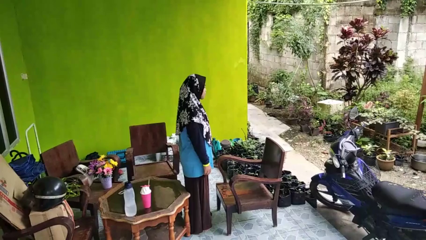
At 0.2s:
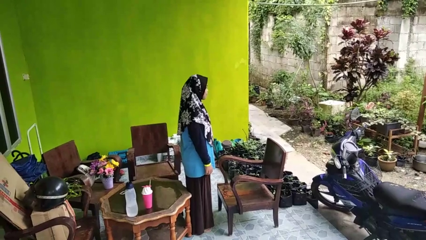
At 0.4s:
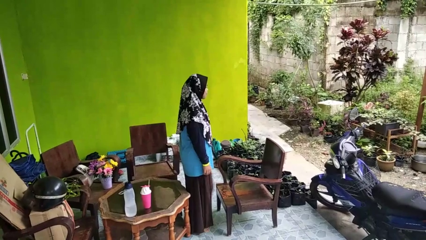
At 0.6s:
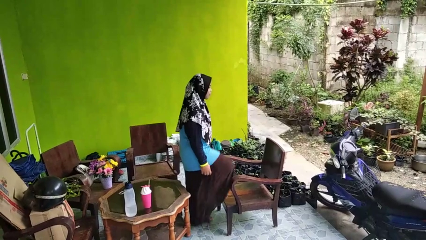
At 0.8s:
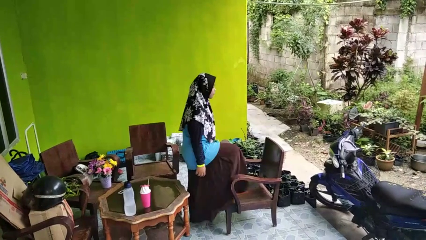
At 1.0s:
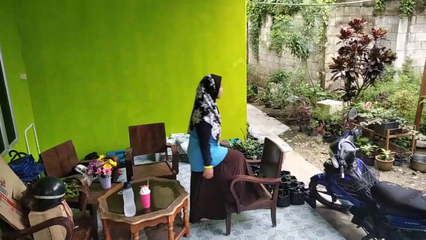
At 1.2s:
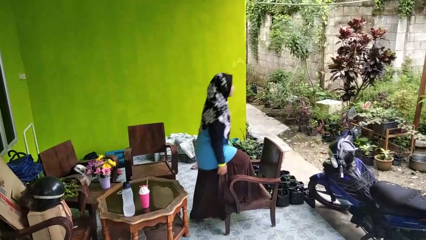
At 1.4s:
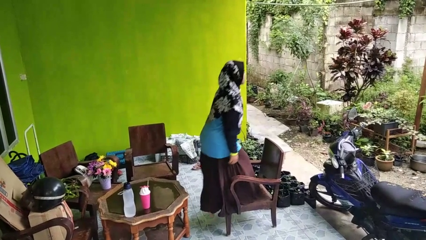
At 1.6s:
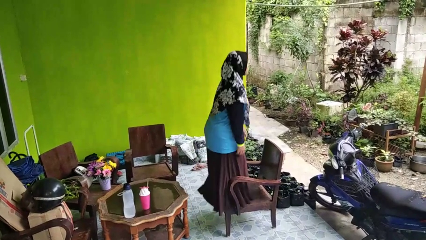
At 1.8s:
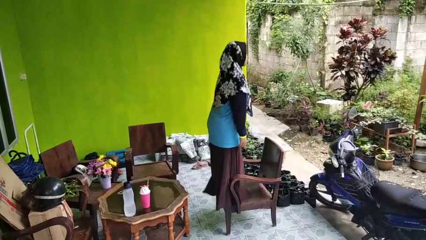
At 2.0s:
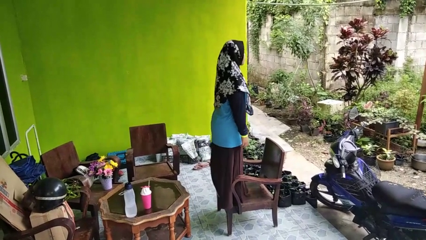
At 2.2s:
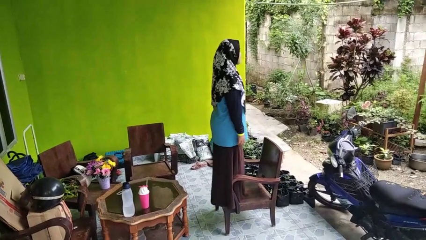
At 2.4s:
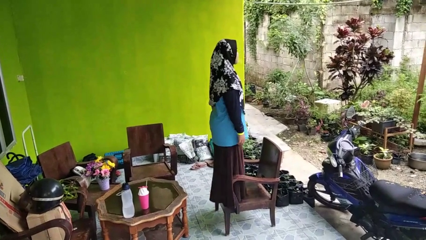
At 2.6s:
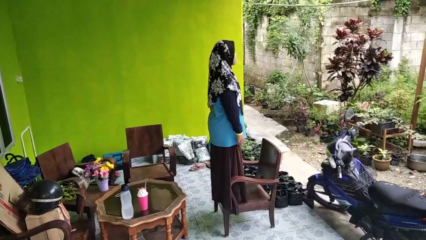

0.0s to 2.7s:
person climbs on chair

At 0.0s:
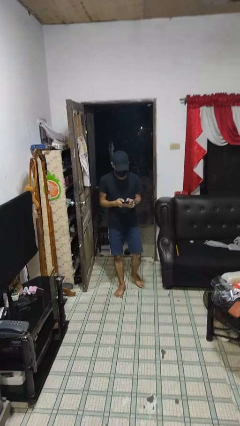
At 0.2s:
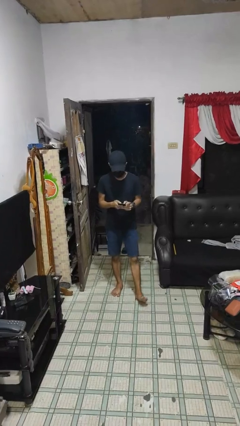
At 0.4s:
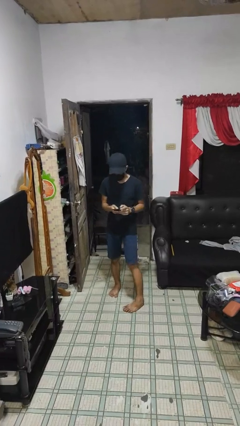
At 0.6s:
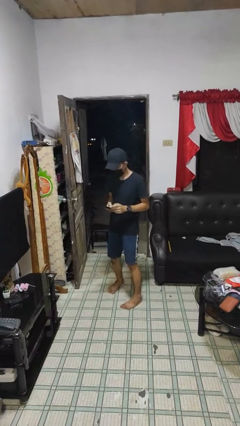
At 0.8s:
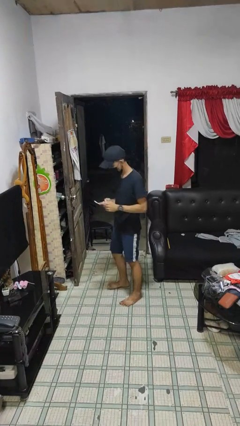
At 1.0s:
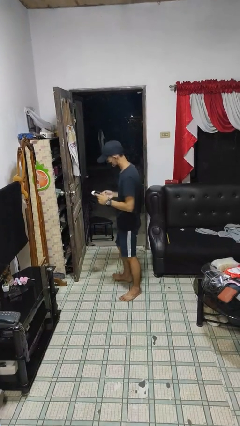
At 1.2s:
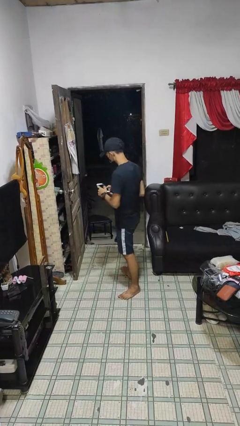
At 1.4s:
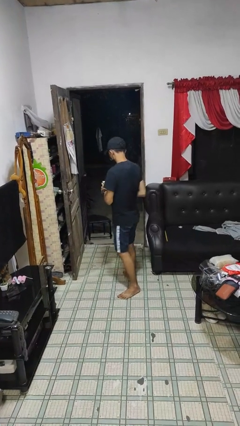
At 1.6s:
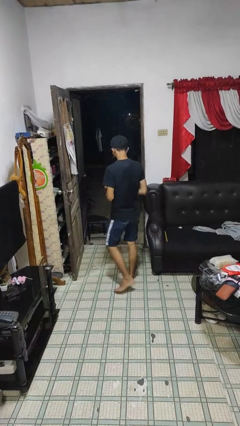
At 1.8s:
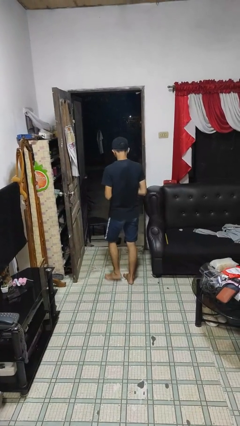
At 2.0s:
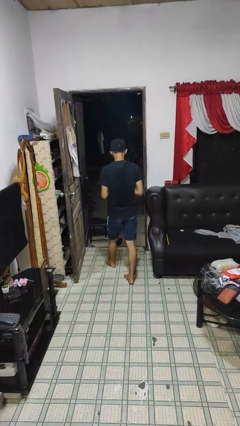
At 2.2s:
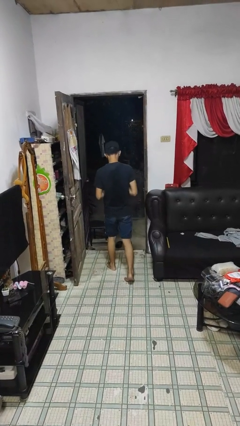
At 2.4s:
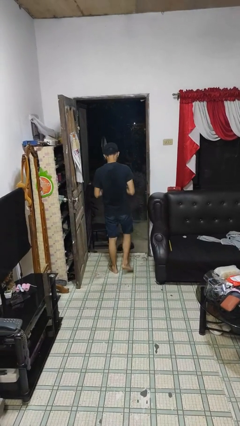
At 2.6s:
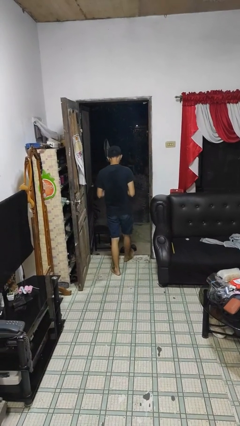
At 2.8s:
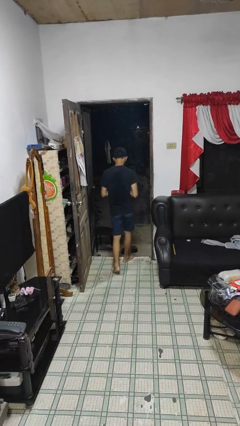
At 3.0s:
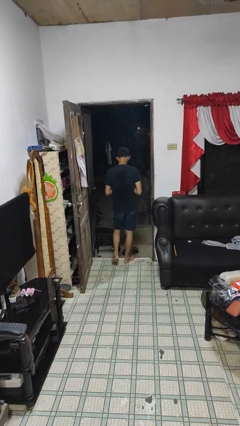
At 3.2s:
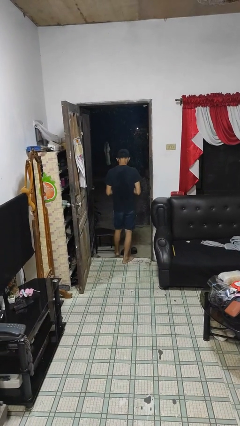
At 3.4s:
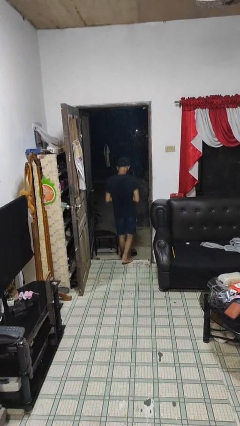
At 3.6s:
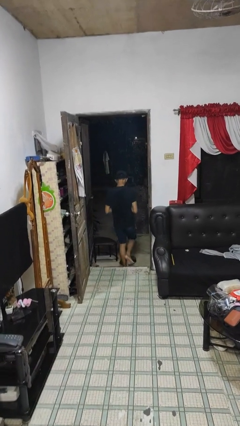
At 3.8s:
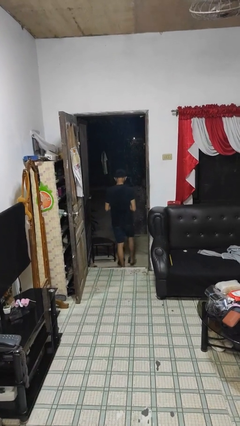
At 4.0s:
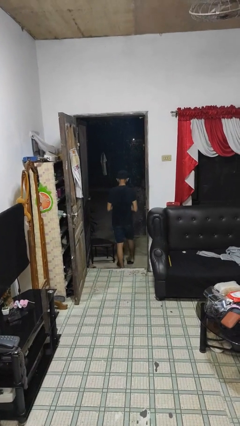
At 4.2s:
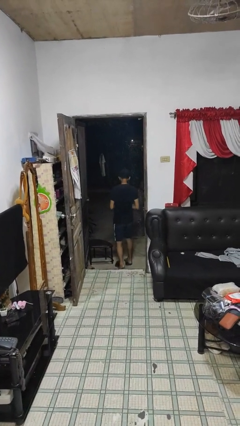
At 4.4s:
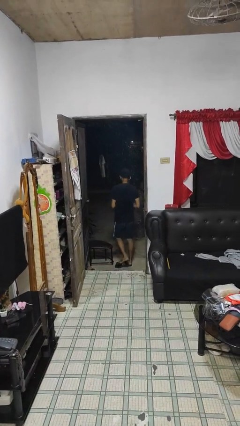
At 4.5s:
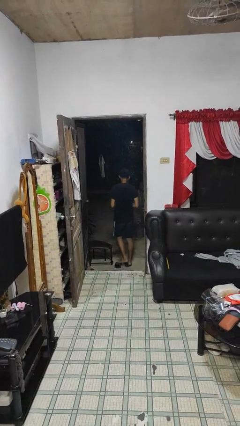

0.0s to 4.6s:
person exits scene through structure

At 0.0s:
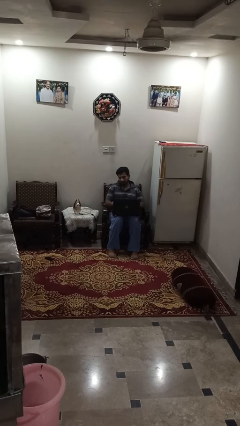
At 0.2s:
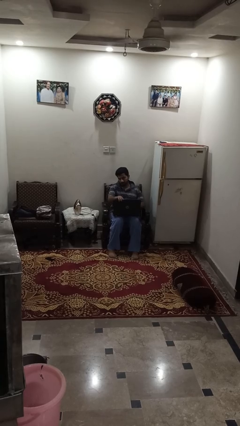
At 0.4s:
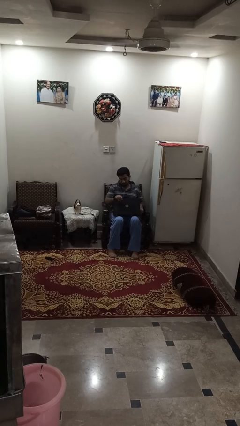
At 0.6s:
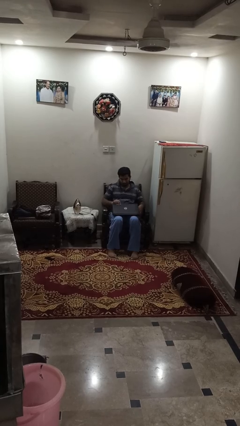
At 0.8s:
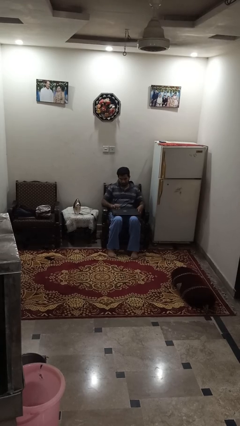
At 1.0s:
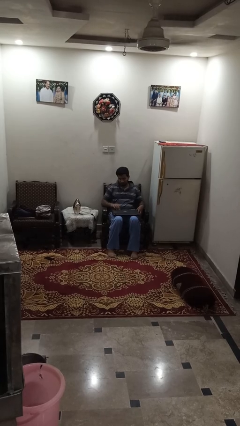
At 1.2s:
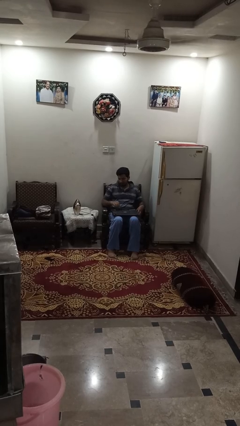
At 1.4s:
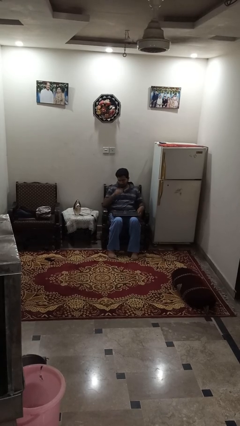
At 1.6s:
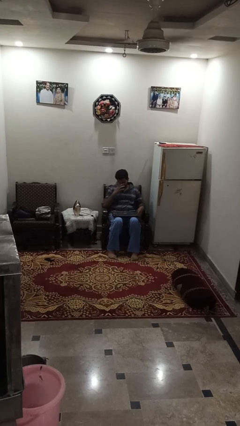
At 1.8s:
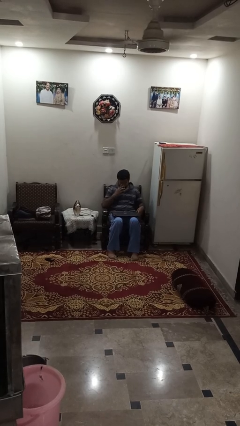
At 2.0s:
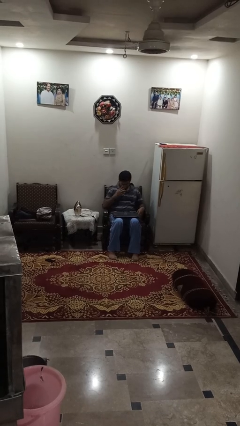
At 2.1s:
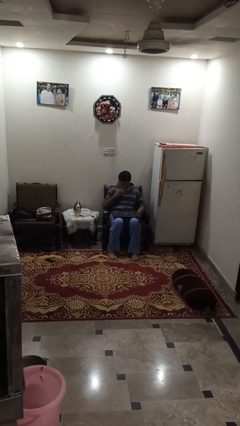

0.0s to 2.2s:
person closes laptop

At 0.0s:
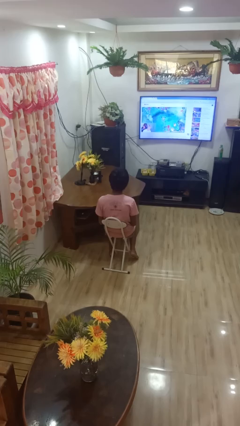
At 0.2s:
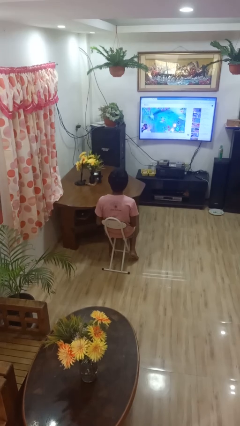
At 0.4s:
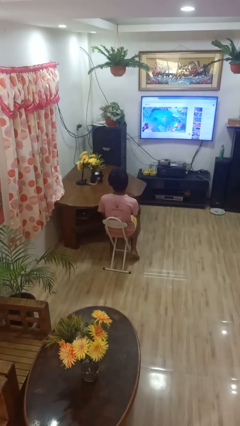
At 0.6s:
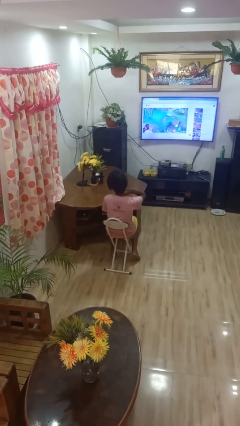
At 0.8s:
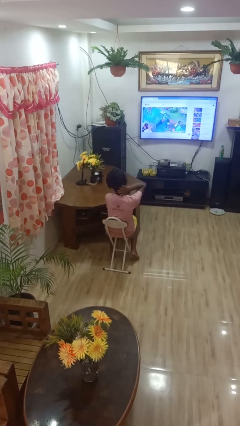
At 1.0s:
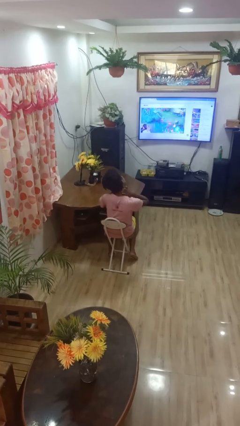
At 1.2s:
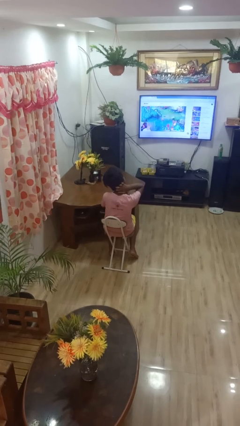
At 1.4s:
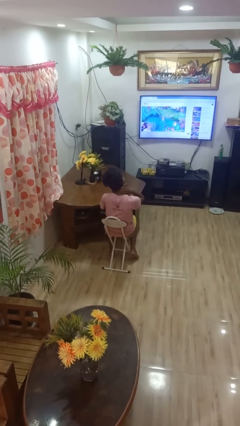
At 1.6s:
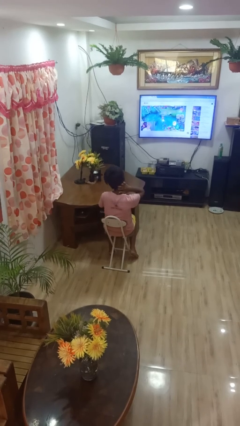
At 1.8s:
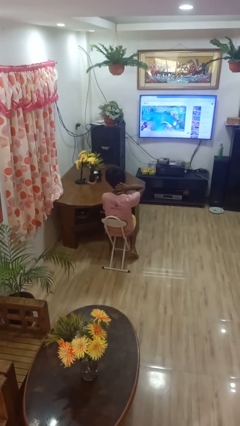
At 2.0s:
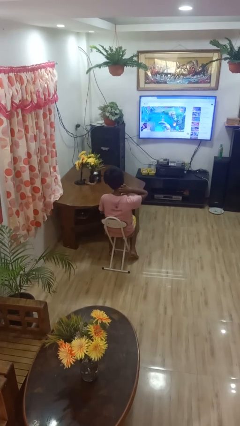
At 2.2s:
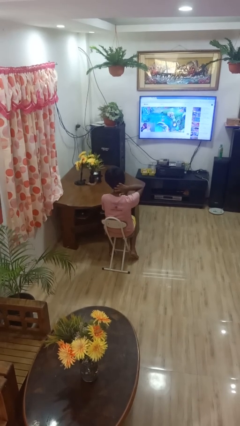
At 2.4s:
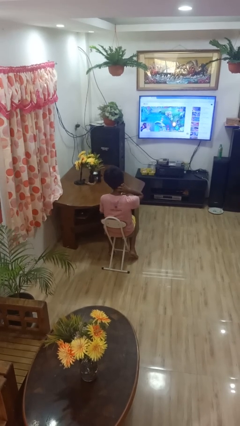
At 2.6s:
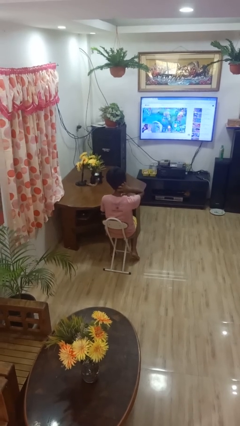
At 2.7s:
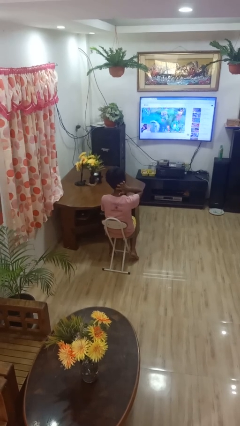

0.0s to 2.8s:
person rubs neck

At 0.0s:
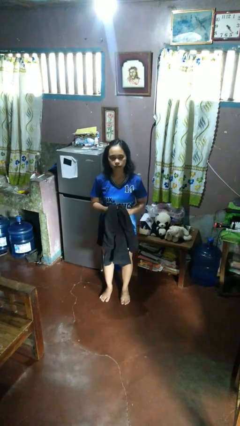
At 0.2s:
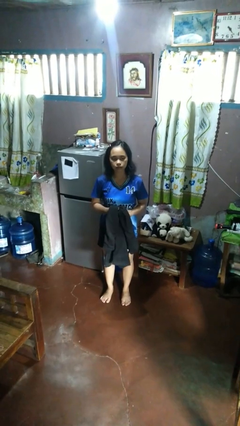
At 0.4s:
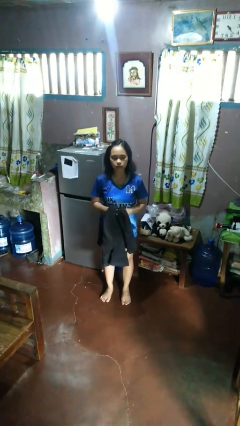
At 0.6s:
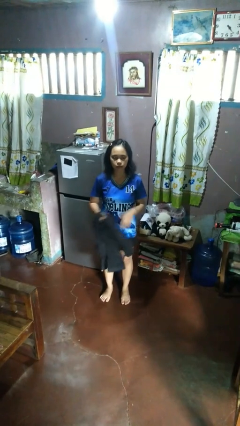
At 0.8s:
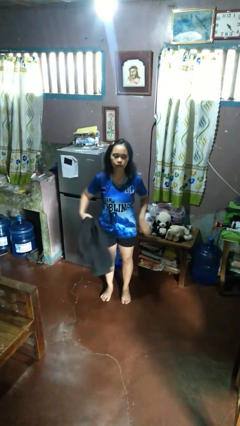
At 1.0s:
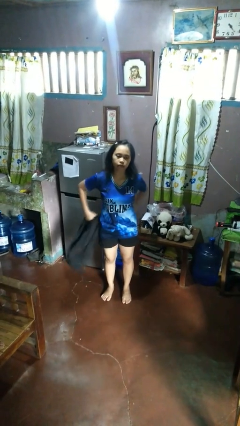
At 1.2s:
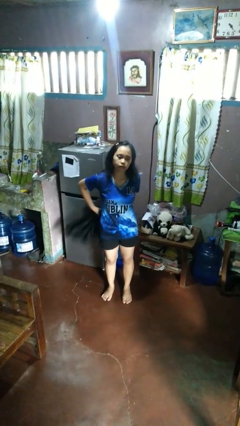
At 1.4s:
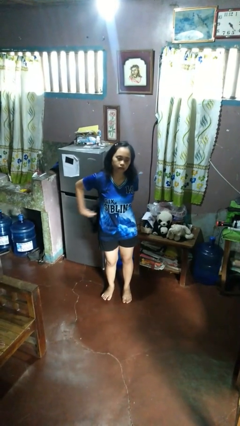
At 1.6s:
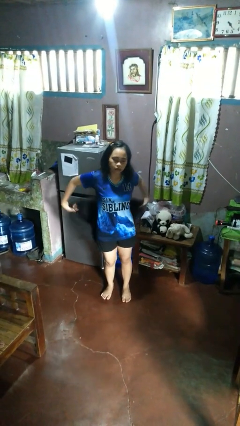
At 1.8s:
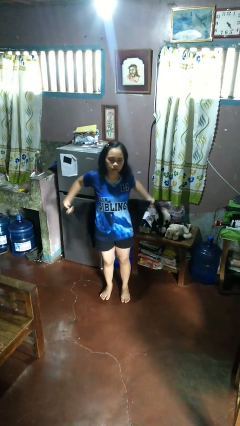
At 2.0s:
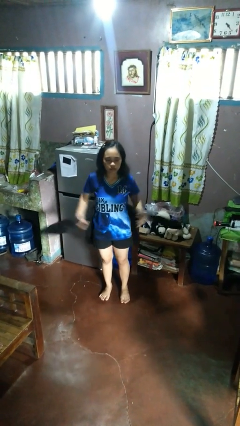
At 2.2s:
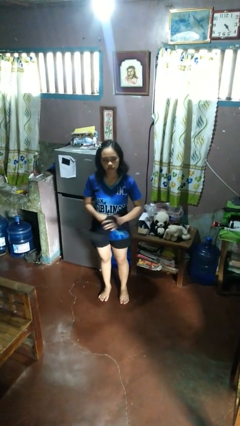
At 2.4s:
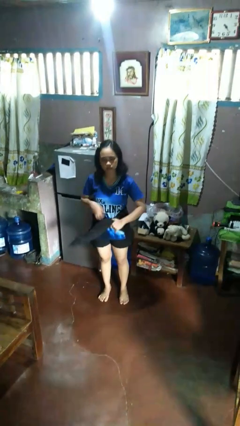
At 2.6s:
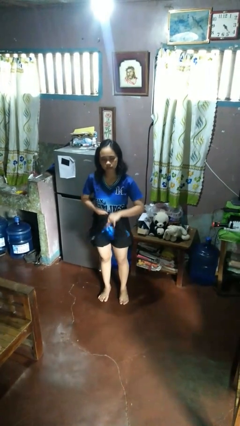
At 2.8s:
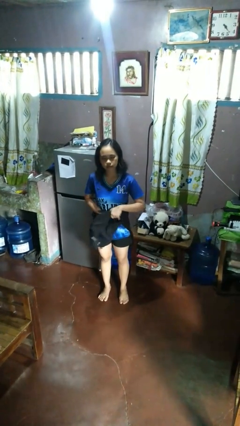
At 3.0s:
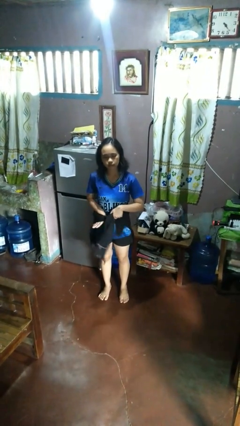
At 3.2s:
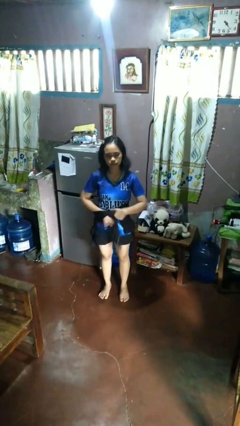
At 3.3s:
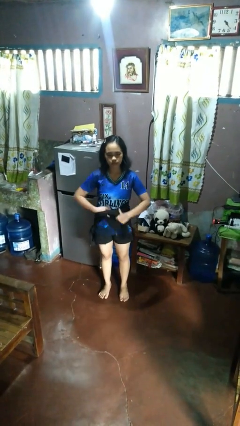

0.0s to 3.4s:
person ties jacket around waist

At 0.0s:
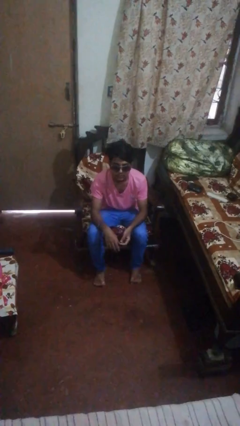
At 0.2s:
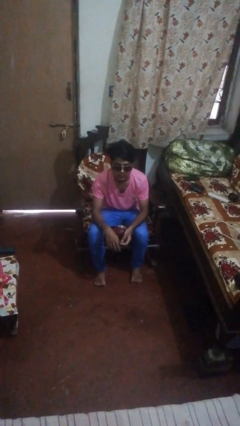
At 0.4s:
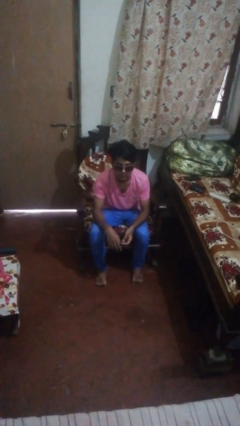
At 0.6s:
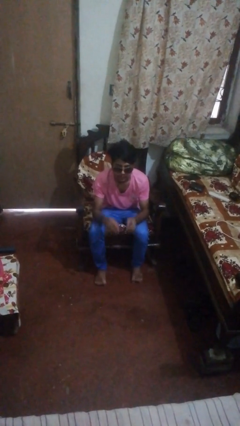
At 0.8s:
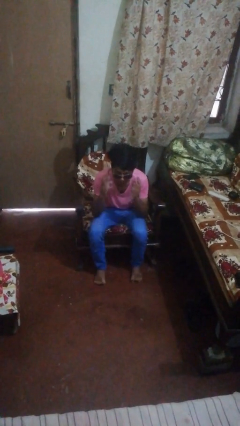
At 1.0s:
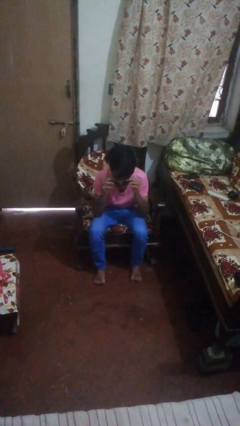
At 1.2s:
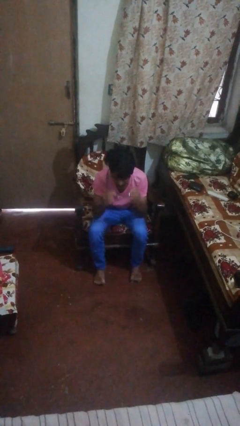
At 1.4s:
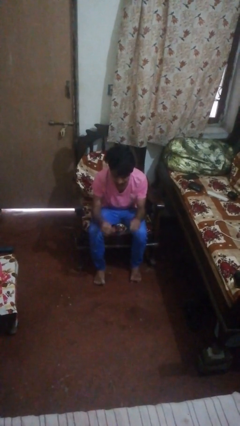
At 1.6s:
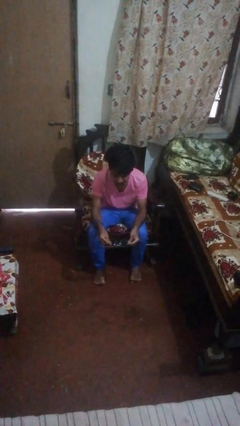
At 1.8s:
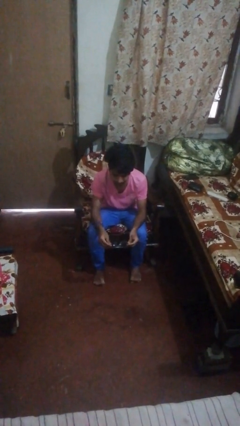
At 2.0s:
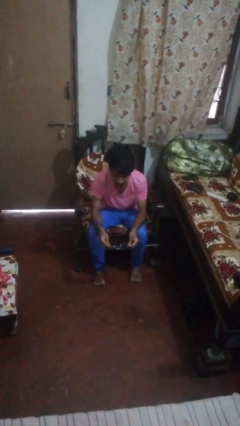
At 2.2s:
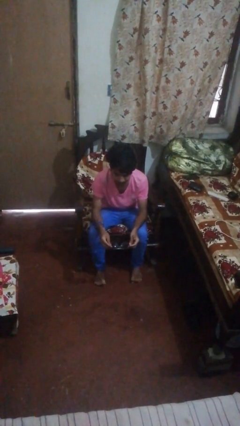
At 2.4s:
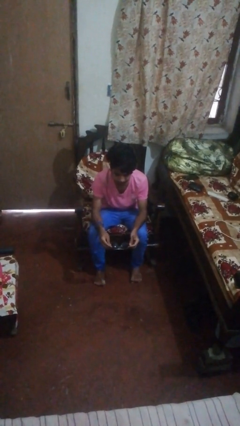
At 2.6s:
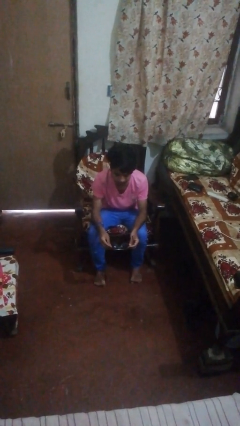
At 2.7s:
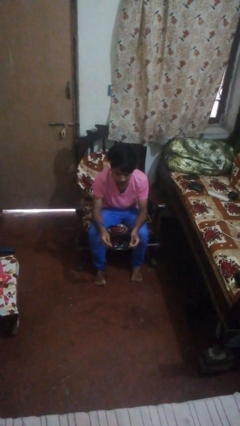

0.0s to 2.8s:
person takes off sunglasses
